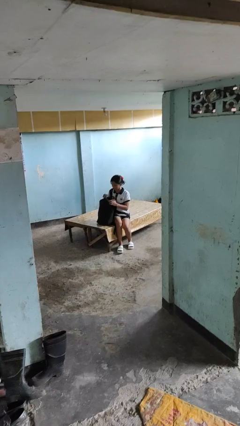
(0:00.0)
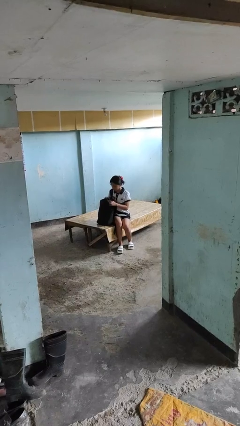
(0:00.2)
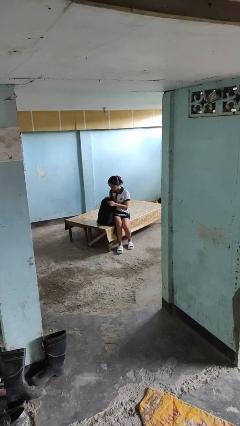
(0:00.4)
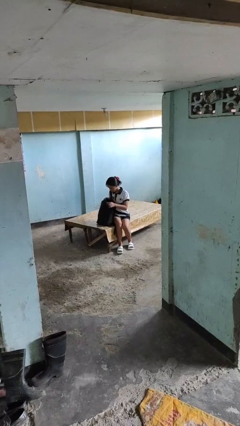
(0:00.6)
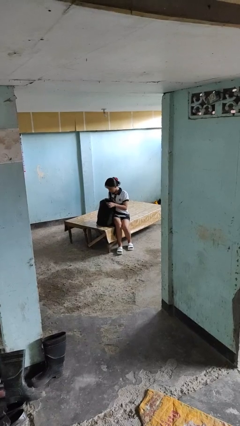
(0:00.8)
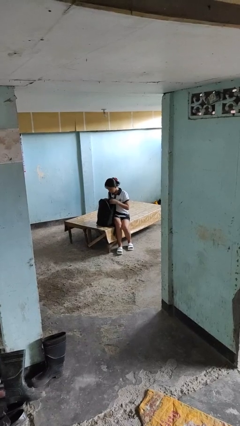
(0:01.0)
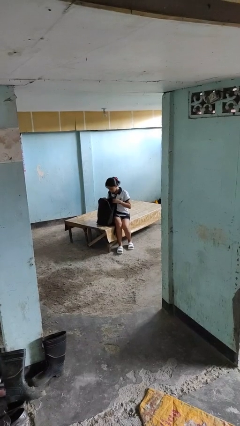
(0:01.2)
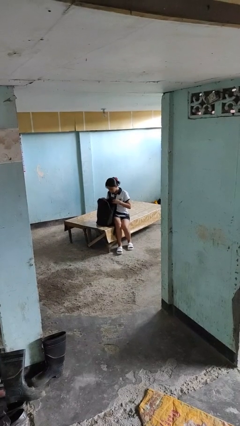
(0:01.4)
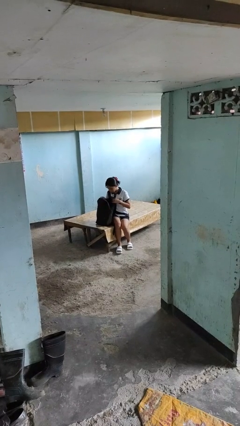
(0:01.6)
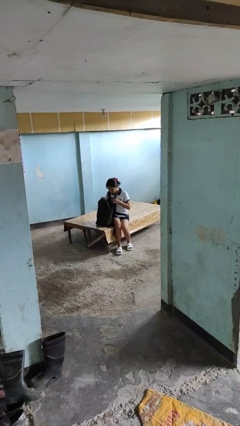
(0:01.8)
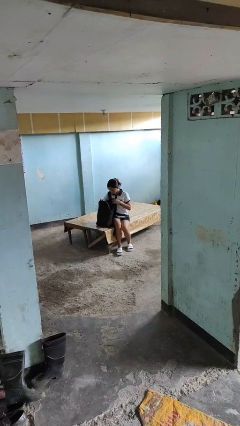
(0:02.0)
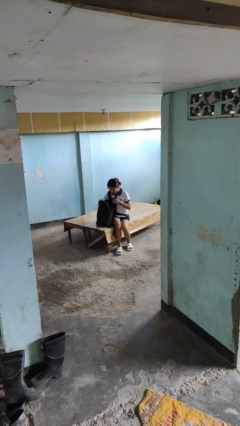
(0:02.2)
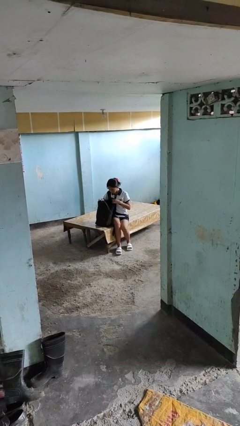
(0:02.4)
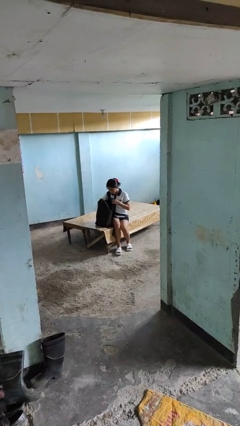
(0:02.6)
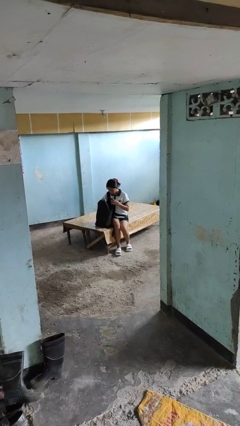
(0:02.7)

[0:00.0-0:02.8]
person searches in backpack

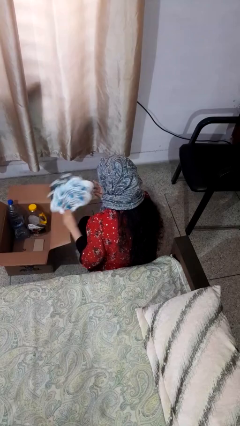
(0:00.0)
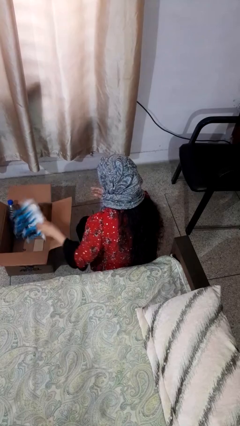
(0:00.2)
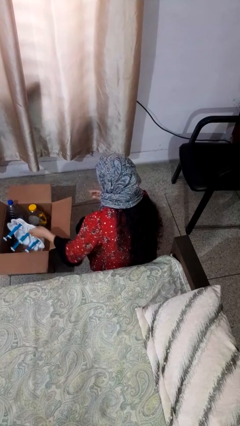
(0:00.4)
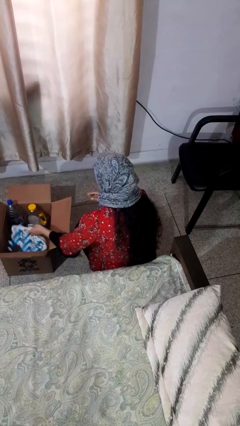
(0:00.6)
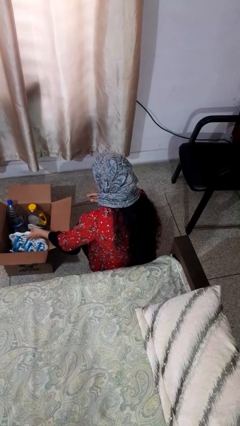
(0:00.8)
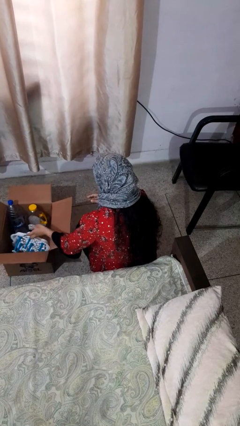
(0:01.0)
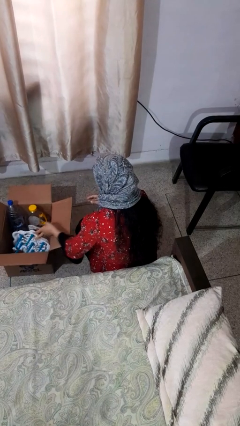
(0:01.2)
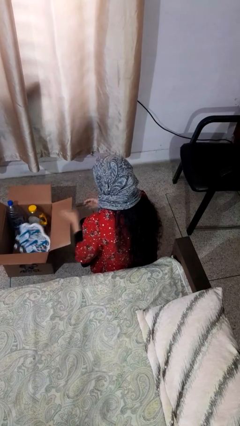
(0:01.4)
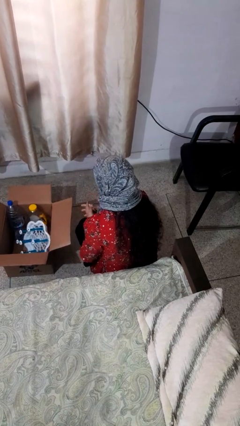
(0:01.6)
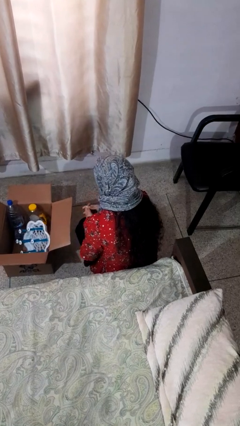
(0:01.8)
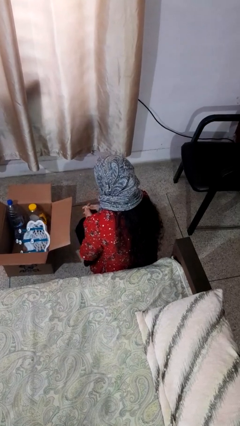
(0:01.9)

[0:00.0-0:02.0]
person puts object into box

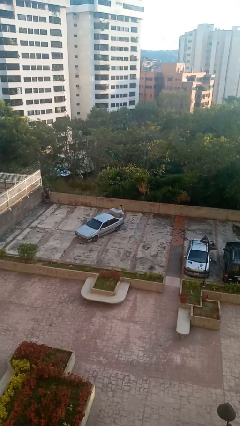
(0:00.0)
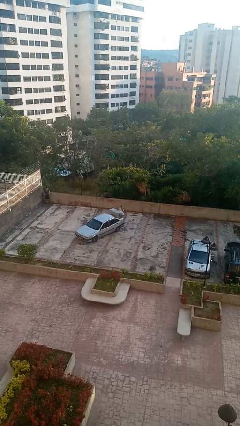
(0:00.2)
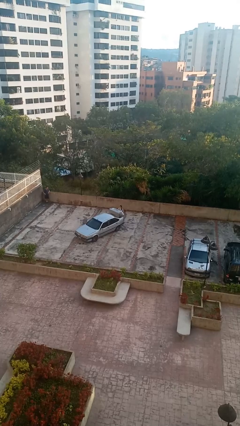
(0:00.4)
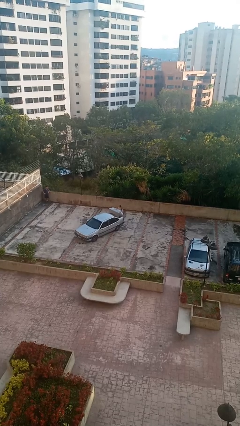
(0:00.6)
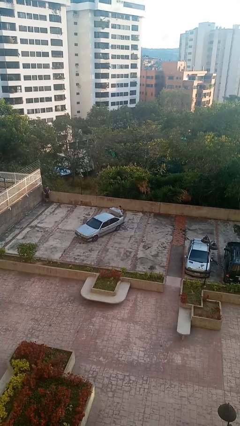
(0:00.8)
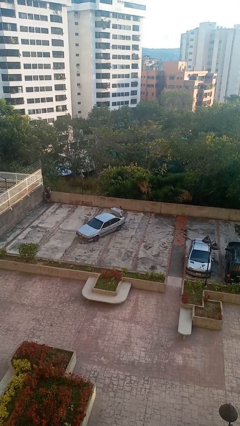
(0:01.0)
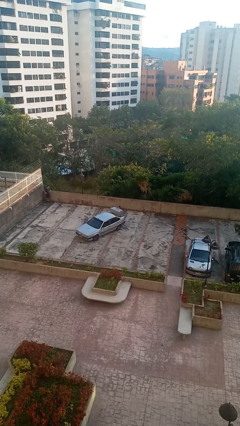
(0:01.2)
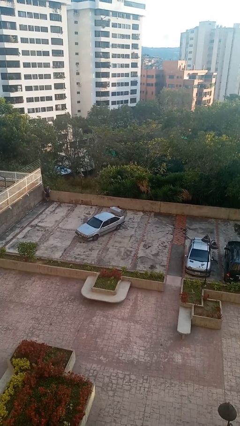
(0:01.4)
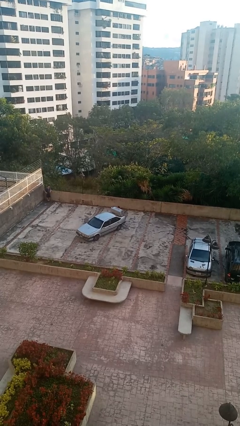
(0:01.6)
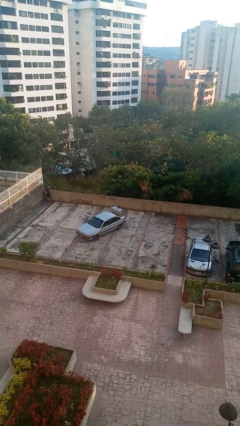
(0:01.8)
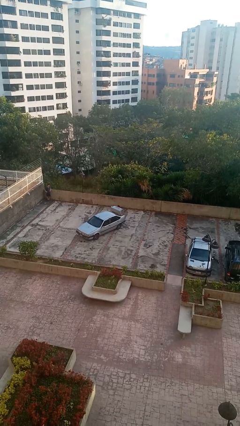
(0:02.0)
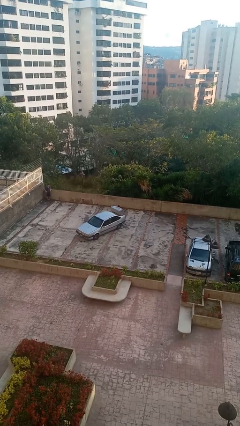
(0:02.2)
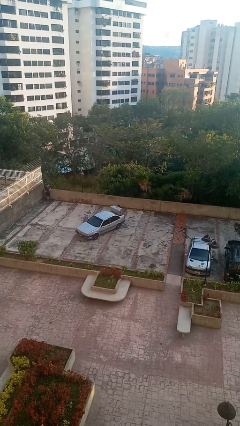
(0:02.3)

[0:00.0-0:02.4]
person loads car

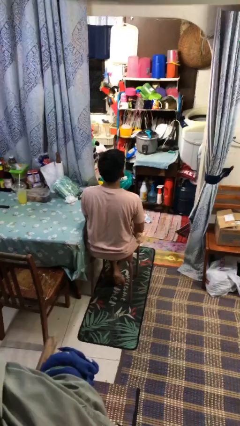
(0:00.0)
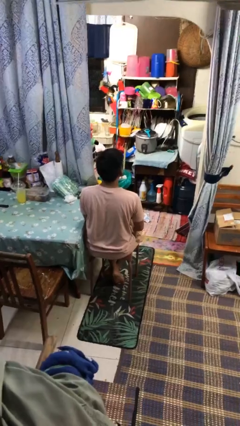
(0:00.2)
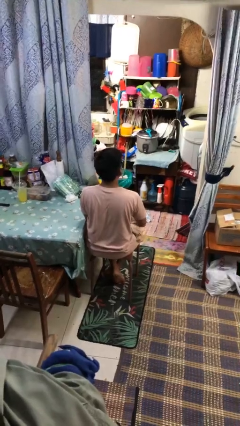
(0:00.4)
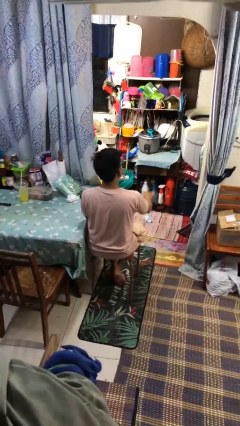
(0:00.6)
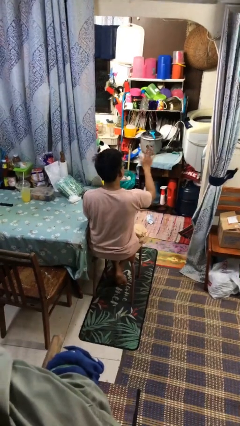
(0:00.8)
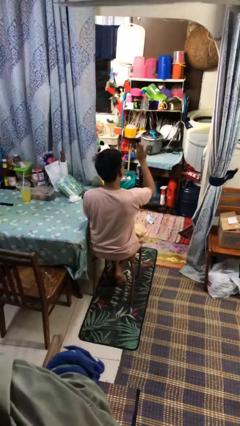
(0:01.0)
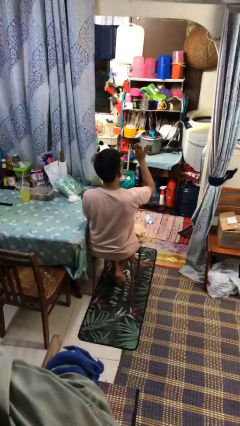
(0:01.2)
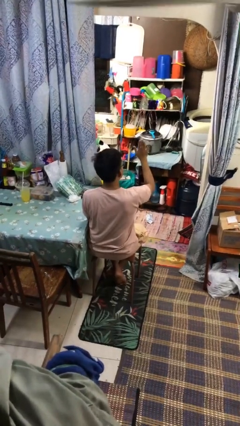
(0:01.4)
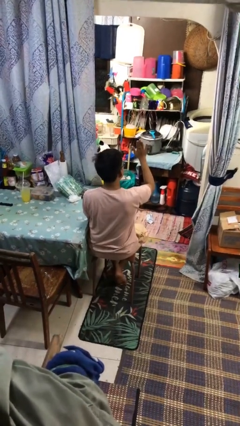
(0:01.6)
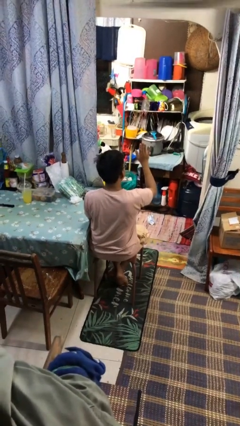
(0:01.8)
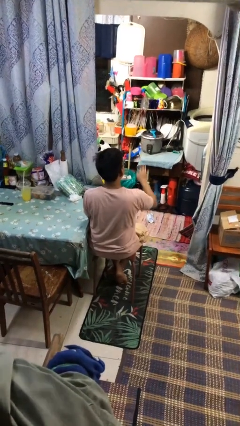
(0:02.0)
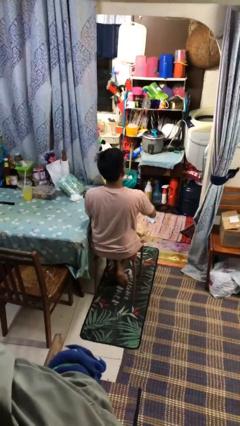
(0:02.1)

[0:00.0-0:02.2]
person gestures stop

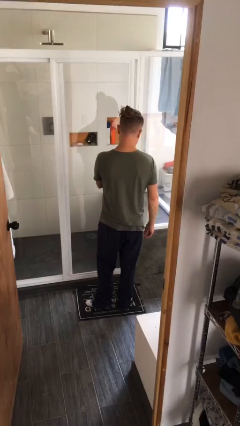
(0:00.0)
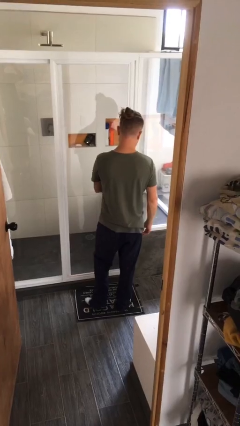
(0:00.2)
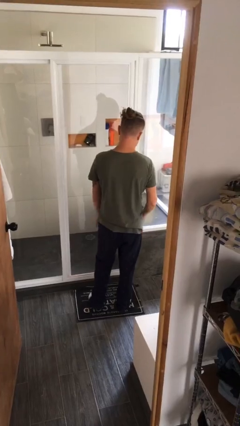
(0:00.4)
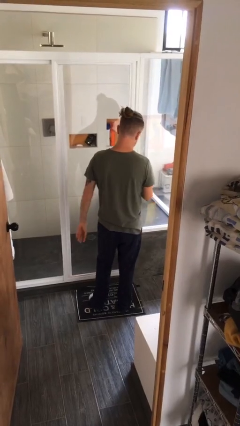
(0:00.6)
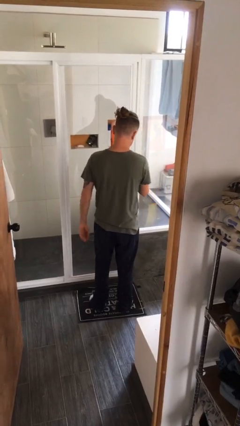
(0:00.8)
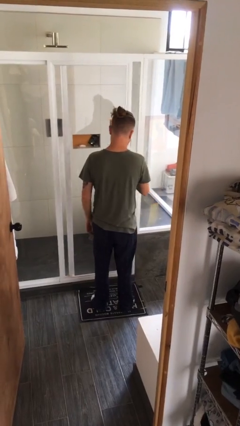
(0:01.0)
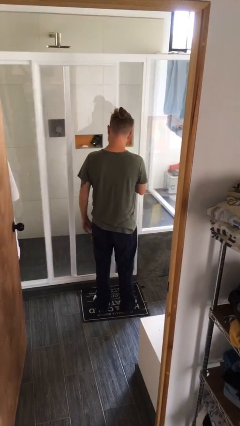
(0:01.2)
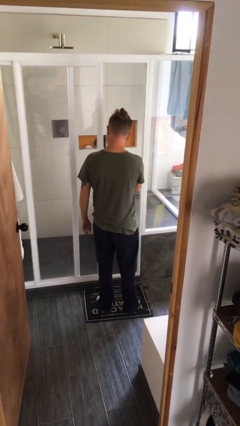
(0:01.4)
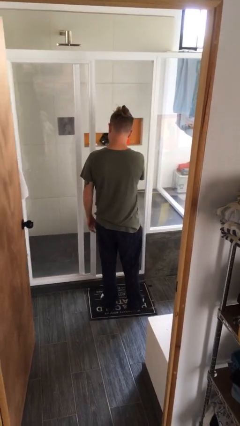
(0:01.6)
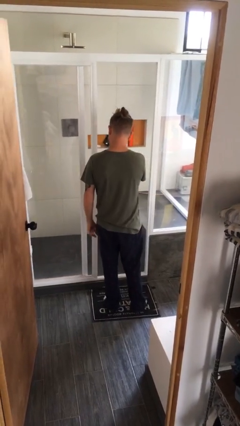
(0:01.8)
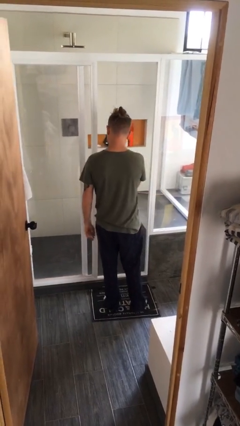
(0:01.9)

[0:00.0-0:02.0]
person opens sliding door

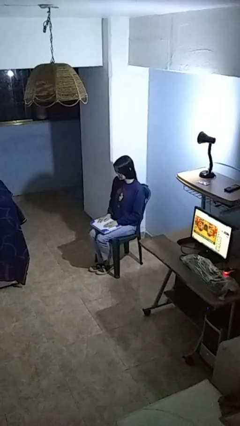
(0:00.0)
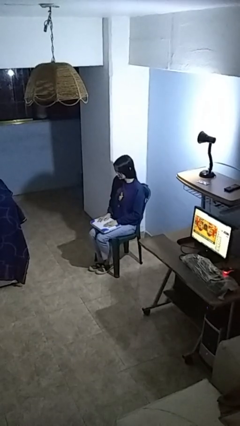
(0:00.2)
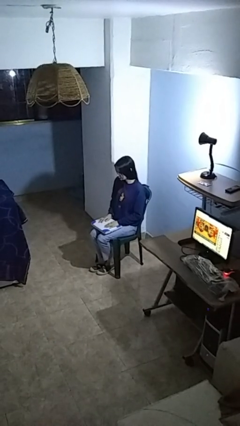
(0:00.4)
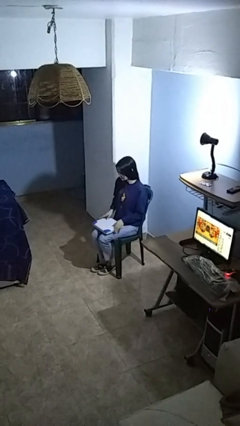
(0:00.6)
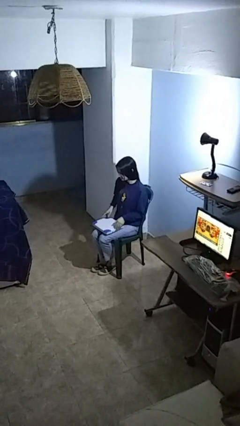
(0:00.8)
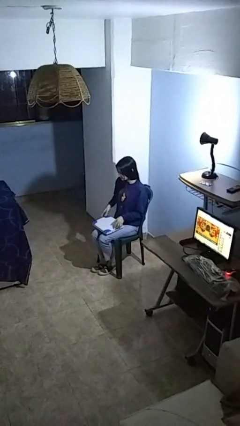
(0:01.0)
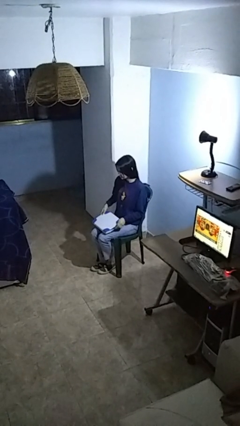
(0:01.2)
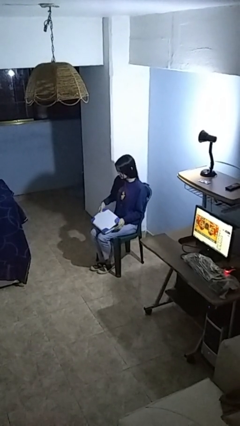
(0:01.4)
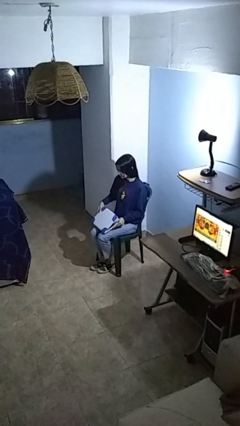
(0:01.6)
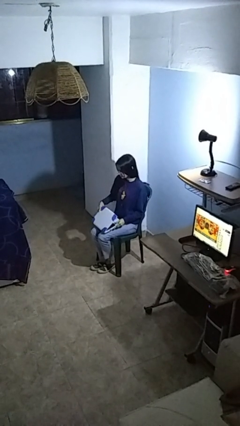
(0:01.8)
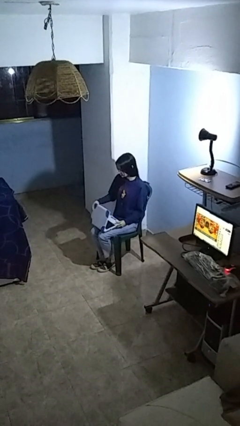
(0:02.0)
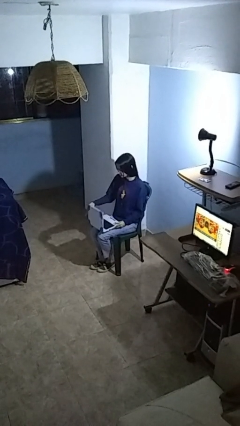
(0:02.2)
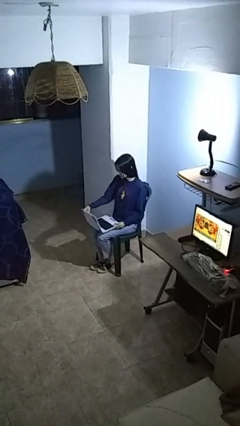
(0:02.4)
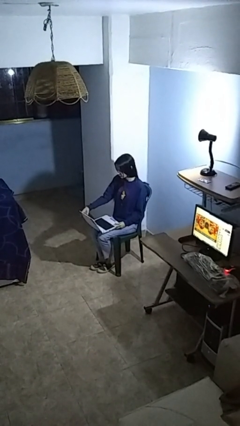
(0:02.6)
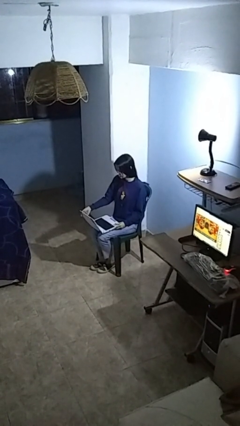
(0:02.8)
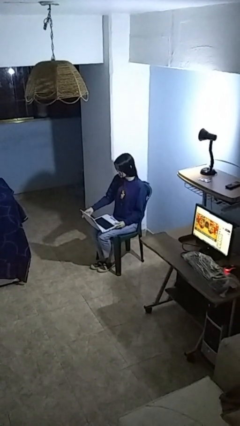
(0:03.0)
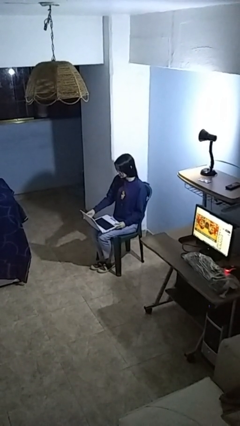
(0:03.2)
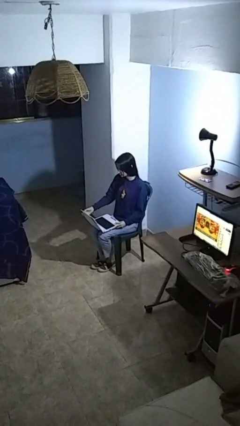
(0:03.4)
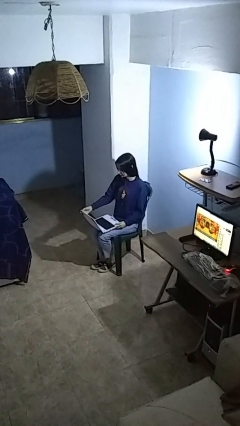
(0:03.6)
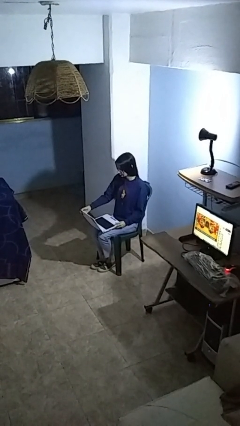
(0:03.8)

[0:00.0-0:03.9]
person opens laptop

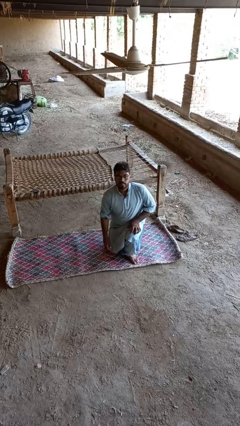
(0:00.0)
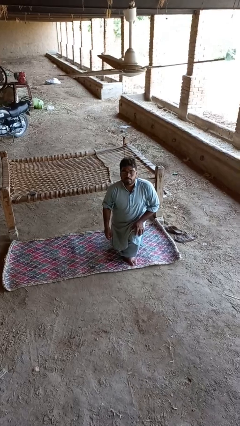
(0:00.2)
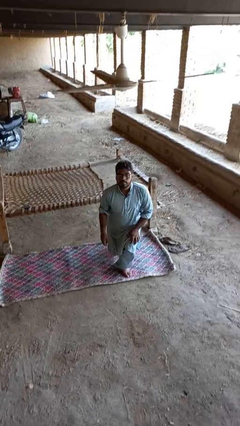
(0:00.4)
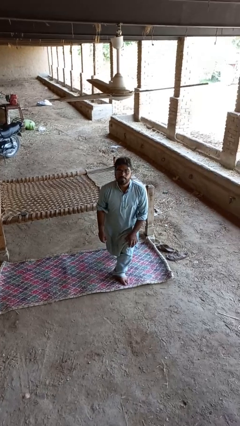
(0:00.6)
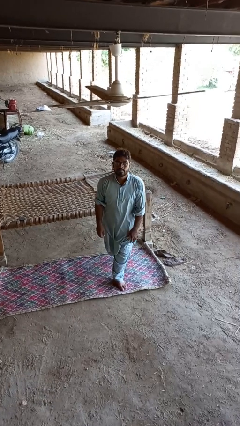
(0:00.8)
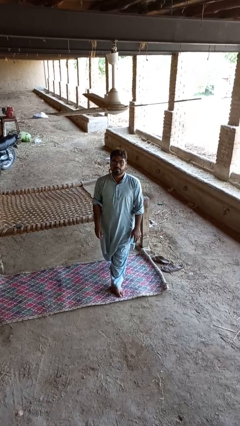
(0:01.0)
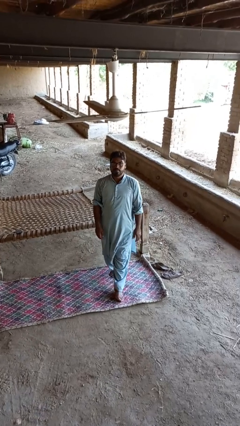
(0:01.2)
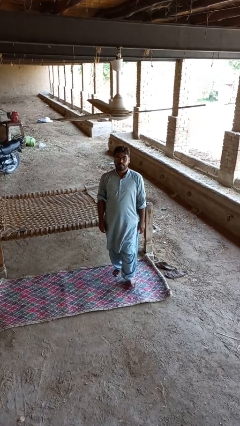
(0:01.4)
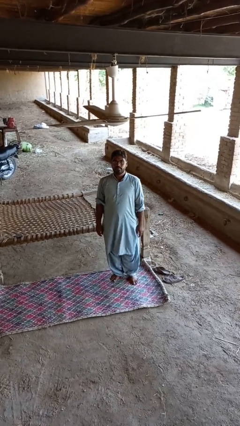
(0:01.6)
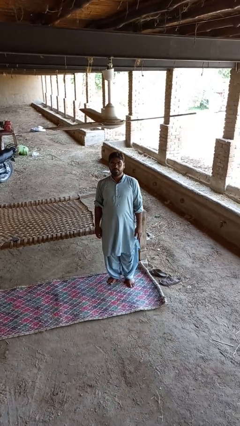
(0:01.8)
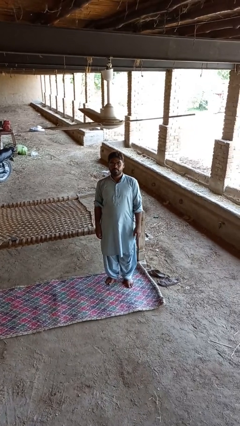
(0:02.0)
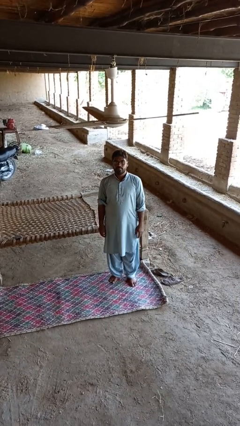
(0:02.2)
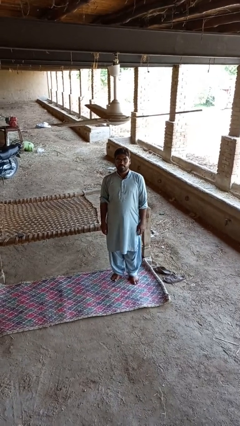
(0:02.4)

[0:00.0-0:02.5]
person stands up from floor
